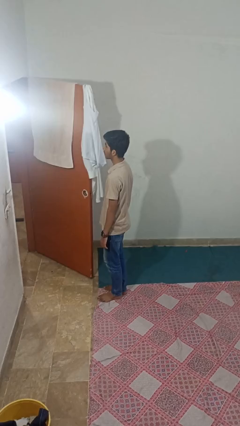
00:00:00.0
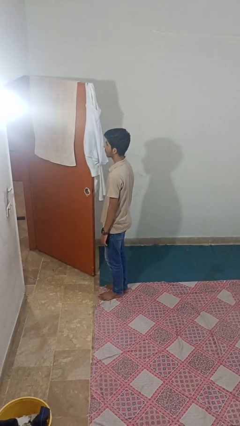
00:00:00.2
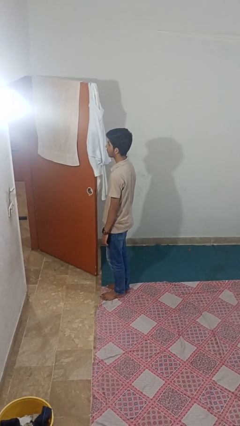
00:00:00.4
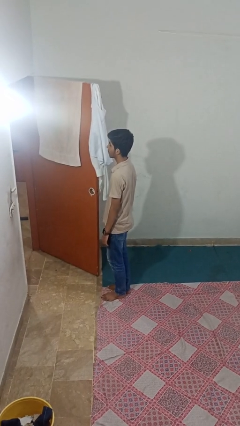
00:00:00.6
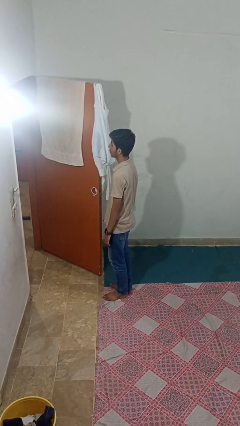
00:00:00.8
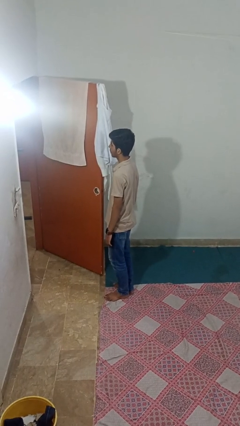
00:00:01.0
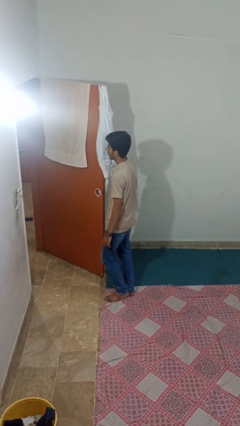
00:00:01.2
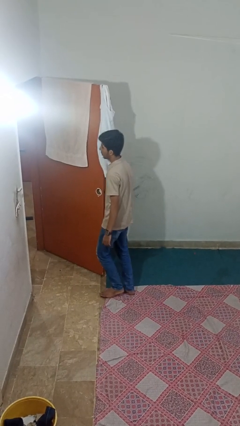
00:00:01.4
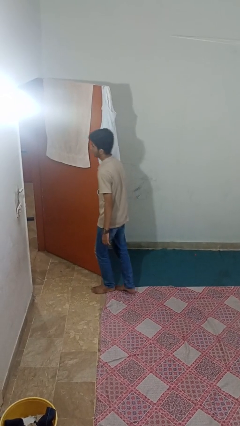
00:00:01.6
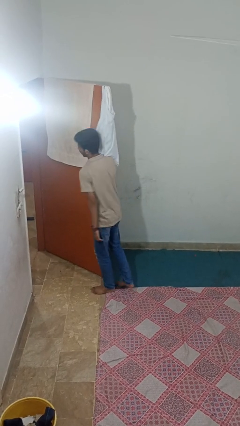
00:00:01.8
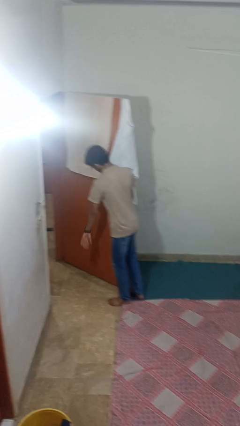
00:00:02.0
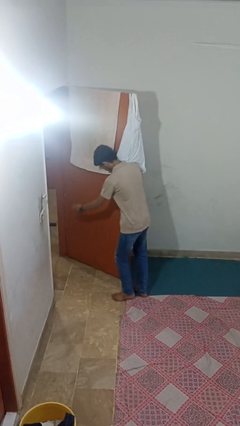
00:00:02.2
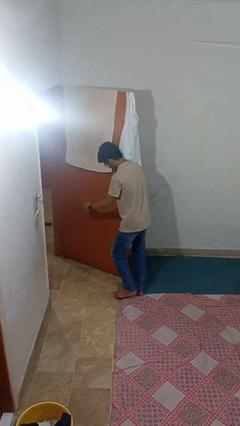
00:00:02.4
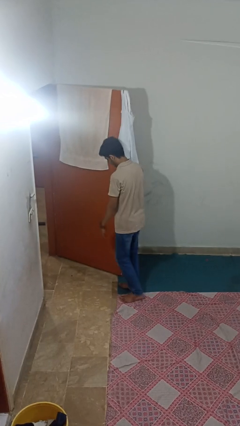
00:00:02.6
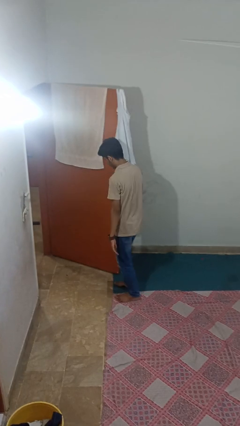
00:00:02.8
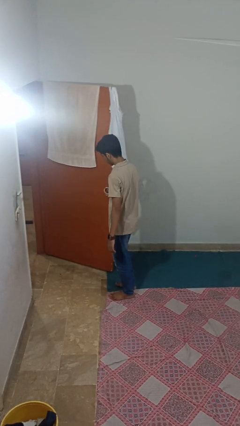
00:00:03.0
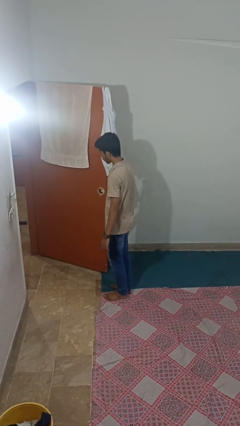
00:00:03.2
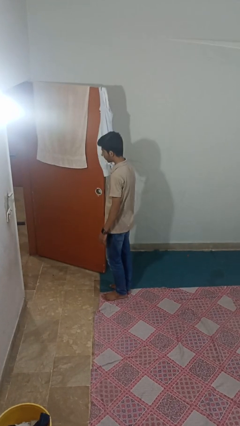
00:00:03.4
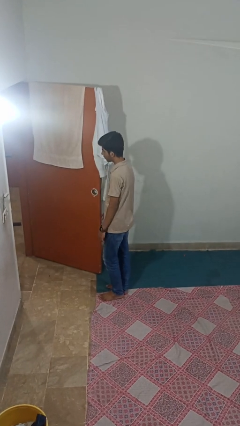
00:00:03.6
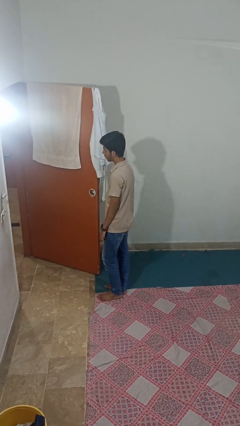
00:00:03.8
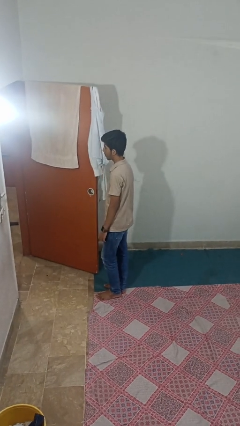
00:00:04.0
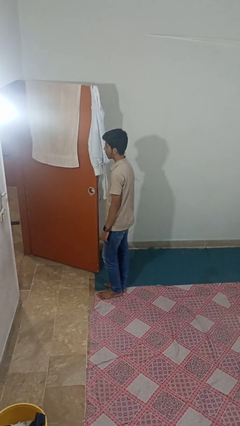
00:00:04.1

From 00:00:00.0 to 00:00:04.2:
person bumps into wall

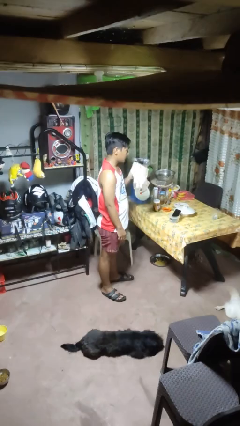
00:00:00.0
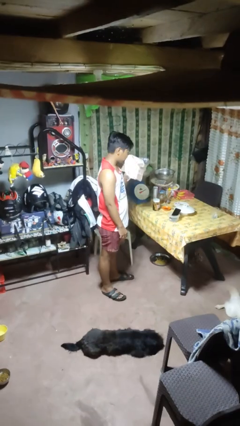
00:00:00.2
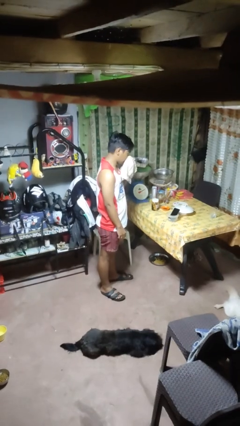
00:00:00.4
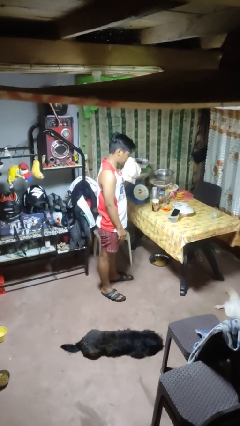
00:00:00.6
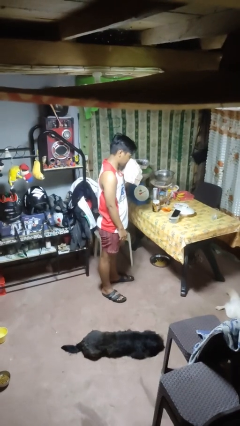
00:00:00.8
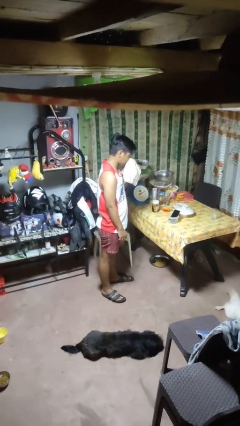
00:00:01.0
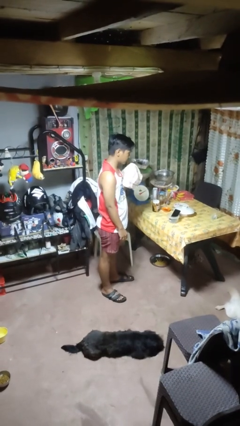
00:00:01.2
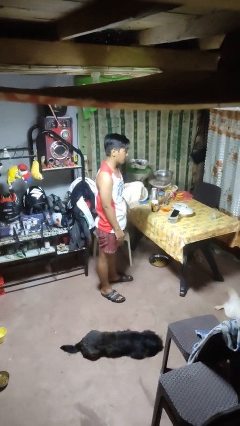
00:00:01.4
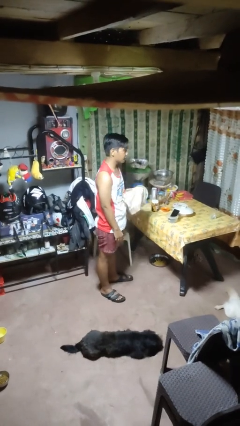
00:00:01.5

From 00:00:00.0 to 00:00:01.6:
person blows nose

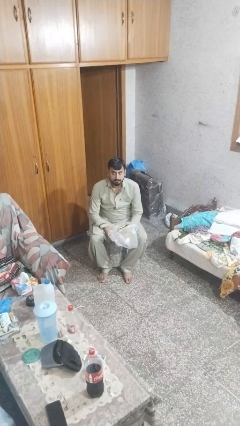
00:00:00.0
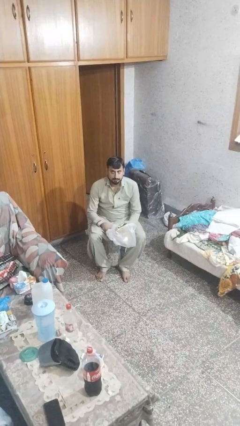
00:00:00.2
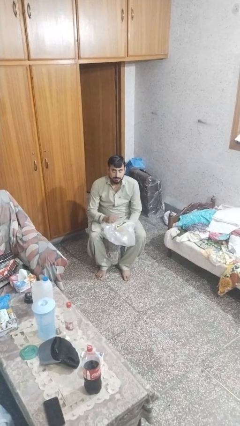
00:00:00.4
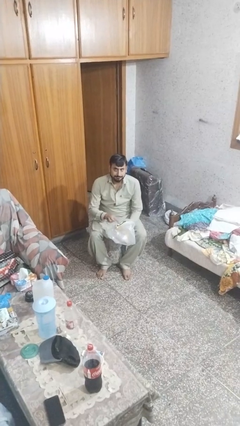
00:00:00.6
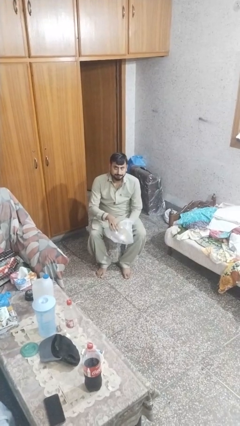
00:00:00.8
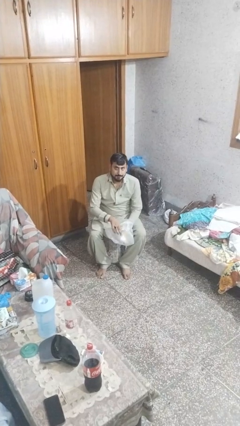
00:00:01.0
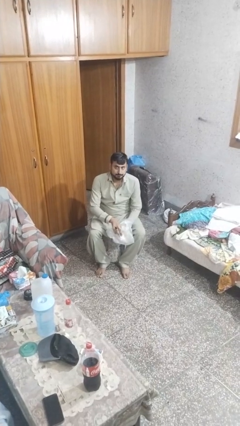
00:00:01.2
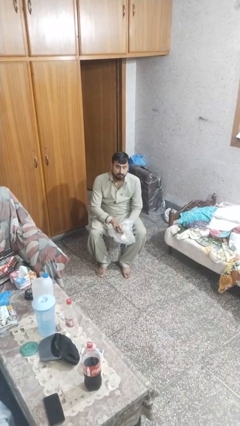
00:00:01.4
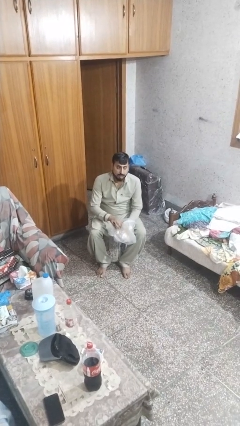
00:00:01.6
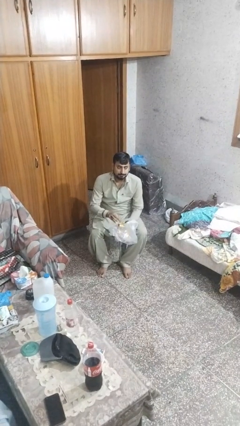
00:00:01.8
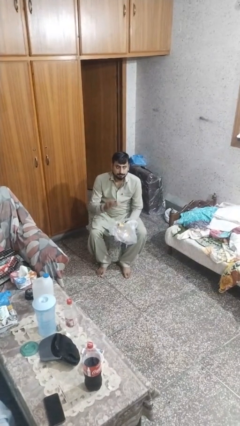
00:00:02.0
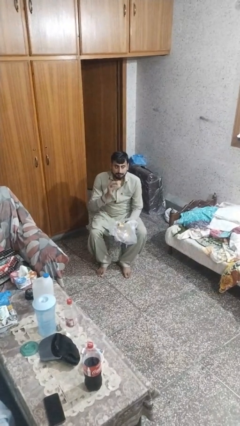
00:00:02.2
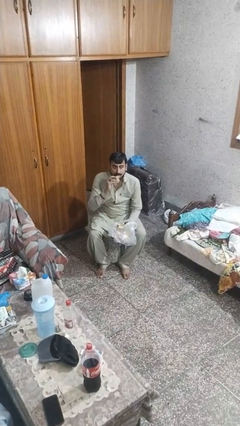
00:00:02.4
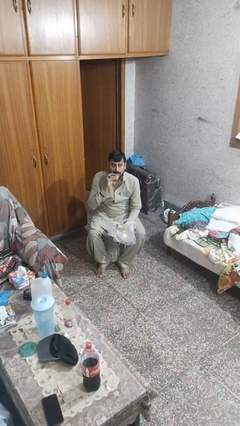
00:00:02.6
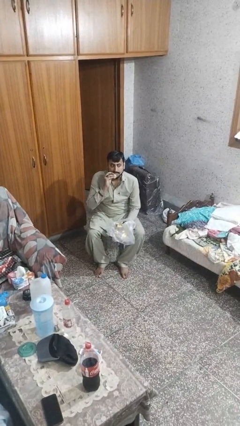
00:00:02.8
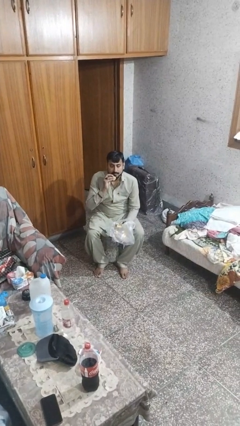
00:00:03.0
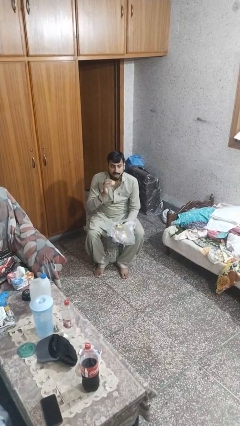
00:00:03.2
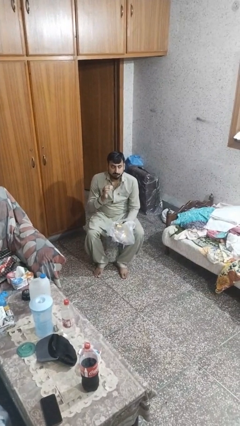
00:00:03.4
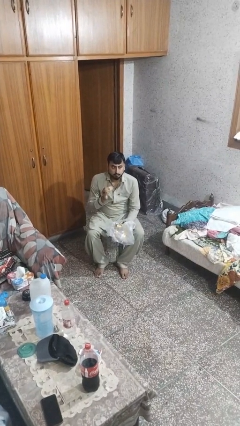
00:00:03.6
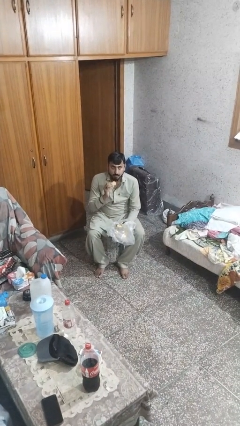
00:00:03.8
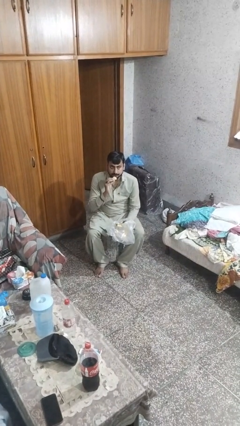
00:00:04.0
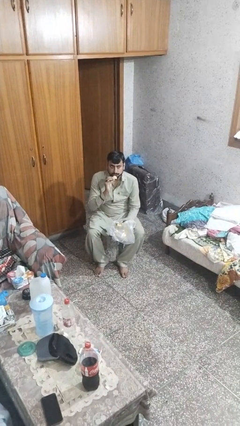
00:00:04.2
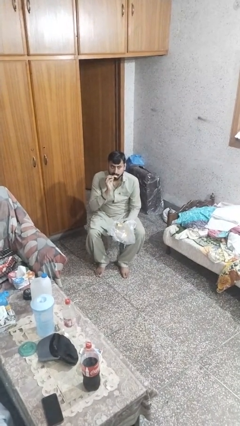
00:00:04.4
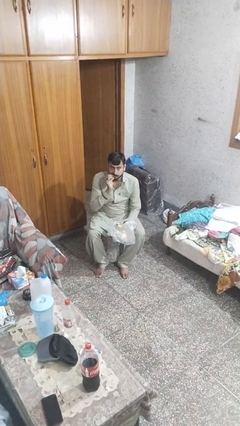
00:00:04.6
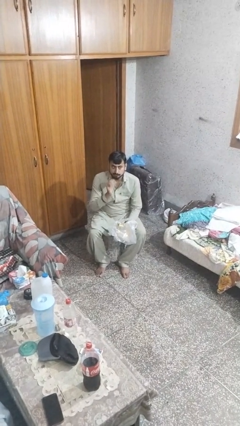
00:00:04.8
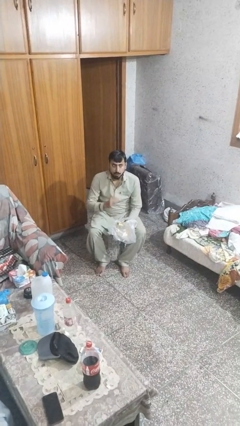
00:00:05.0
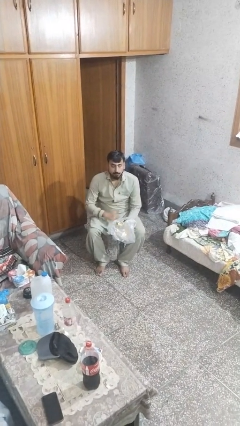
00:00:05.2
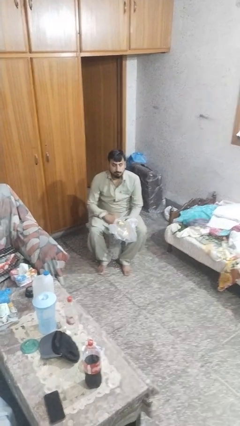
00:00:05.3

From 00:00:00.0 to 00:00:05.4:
person eats snack from bag

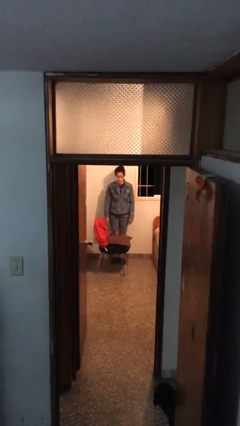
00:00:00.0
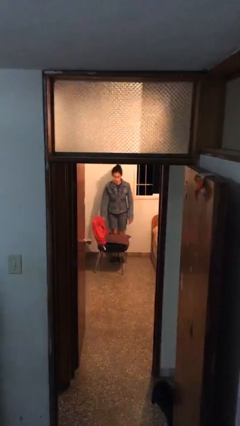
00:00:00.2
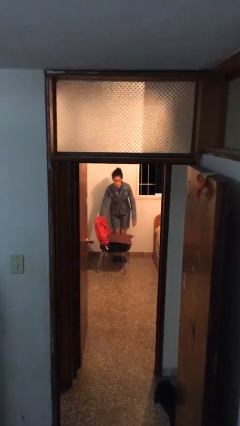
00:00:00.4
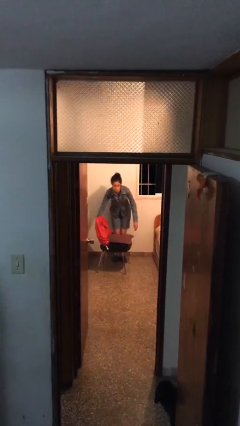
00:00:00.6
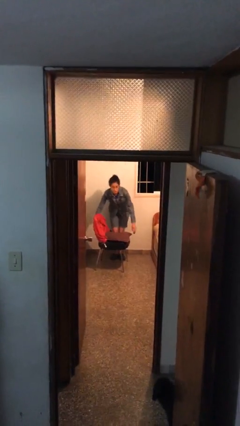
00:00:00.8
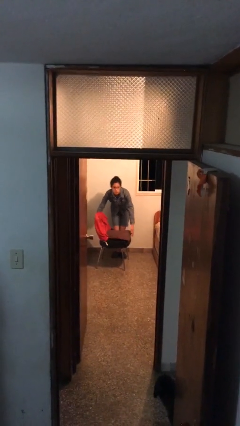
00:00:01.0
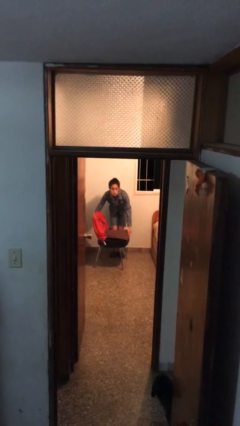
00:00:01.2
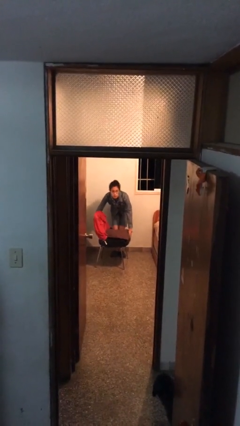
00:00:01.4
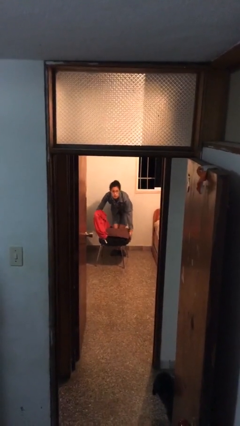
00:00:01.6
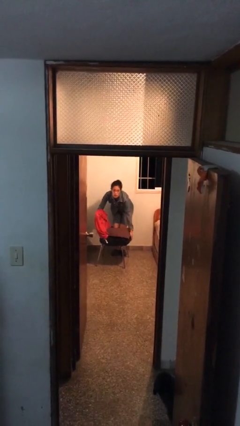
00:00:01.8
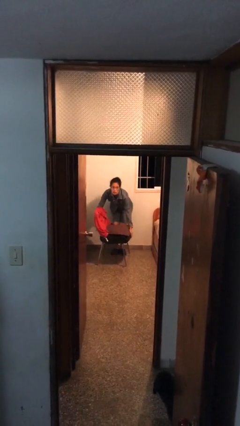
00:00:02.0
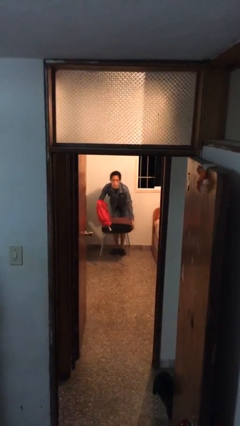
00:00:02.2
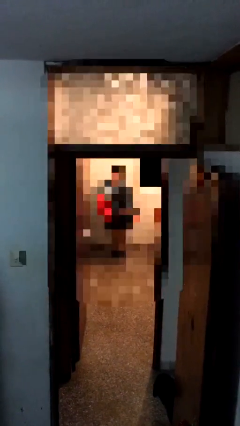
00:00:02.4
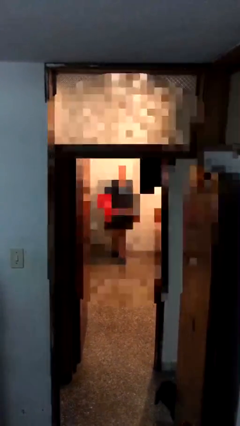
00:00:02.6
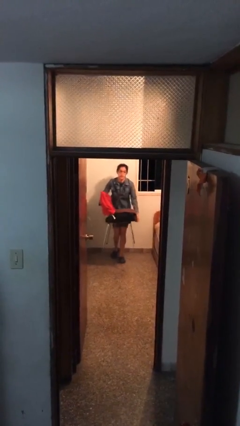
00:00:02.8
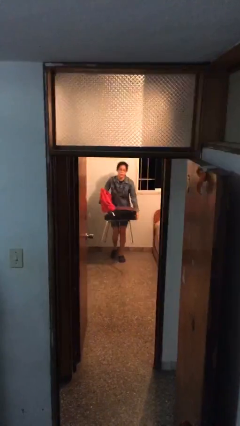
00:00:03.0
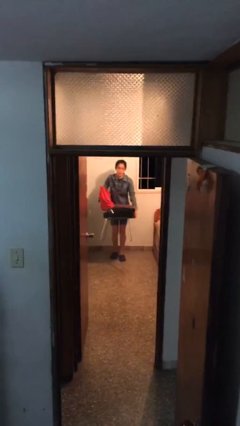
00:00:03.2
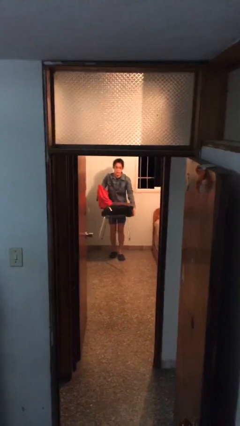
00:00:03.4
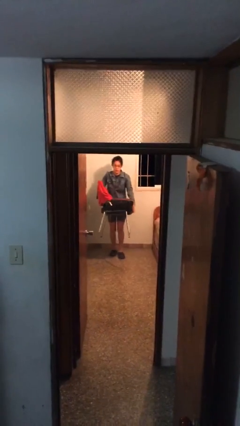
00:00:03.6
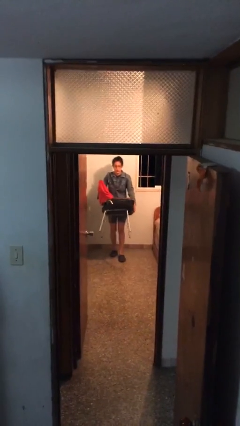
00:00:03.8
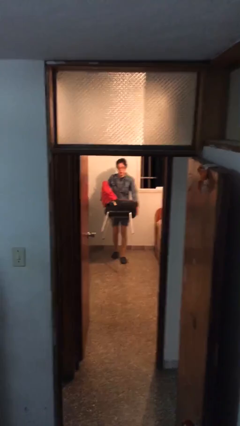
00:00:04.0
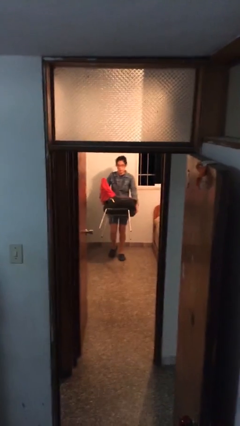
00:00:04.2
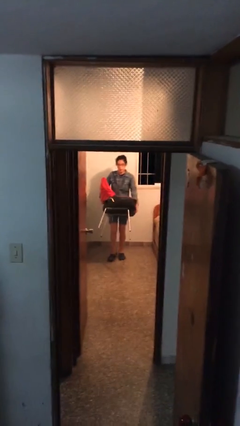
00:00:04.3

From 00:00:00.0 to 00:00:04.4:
person picks up object from floor

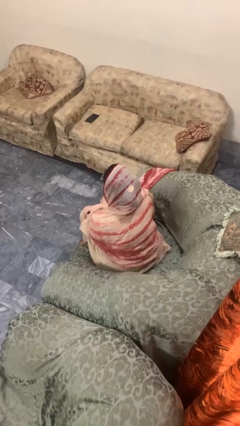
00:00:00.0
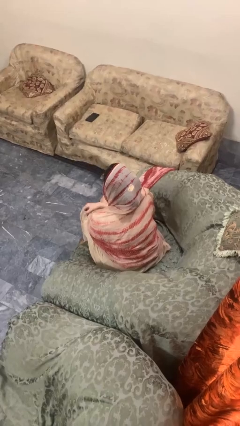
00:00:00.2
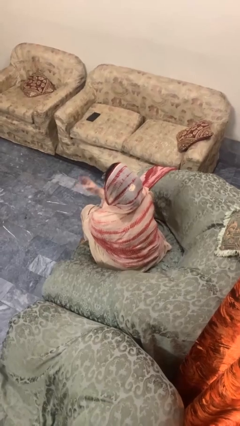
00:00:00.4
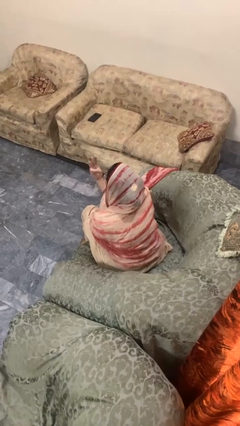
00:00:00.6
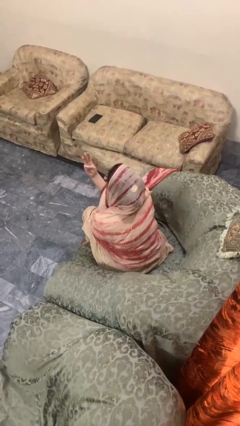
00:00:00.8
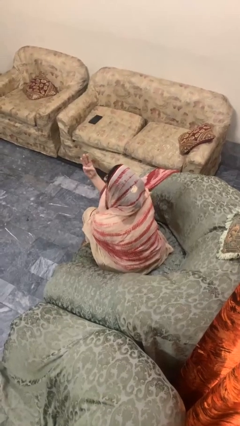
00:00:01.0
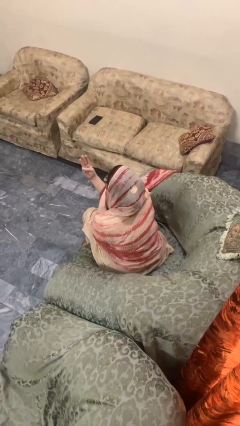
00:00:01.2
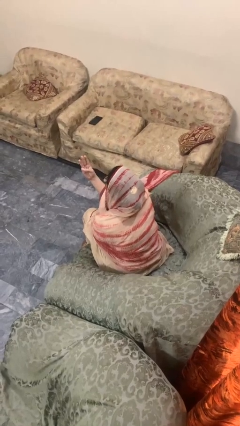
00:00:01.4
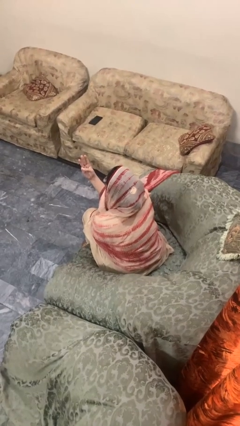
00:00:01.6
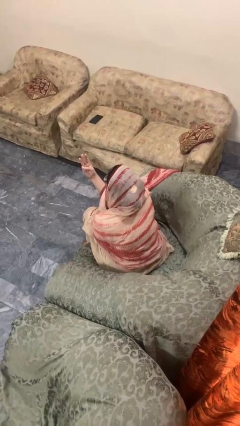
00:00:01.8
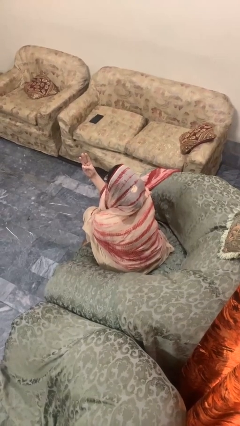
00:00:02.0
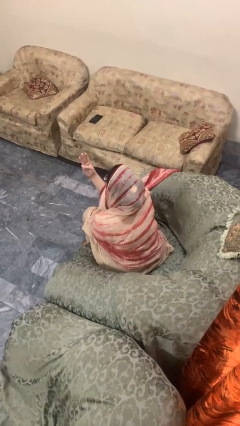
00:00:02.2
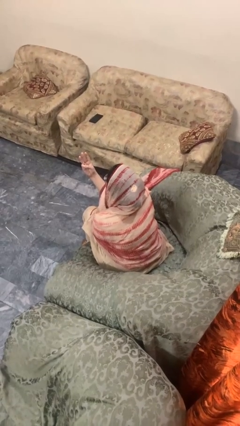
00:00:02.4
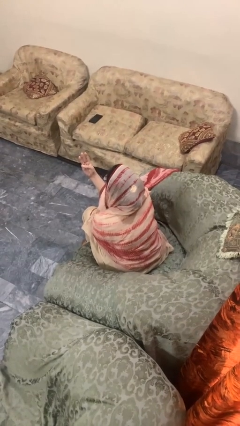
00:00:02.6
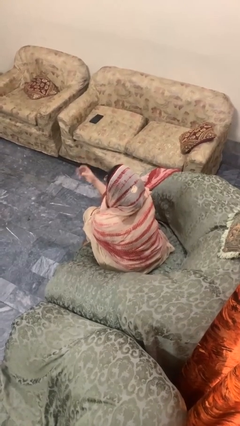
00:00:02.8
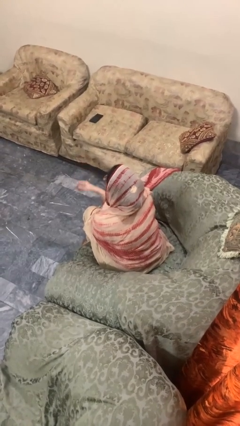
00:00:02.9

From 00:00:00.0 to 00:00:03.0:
person gestures number three
